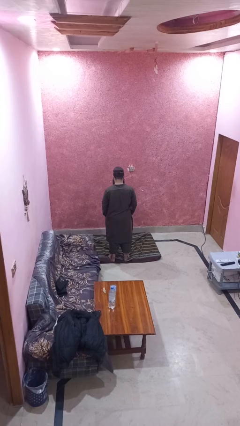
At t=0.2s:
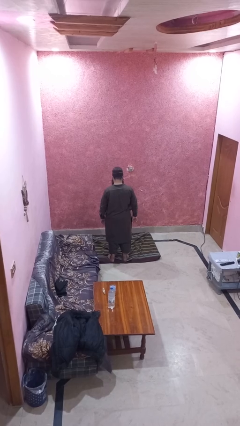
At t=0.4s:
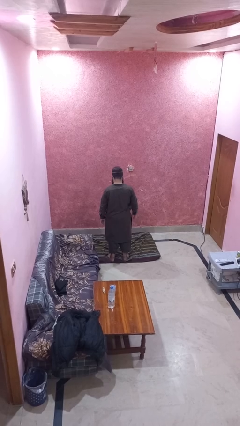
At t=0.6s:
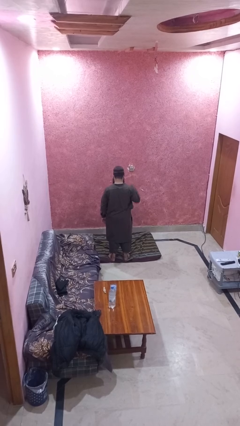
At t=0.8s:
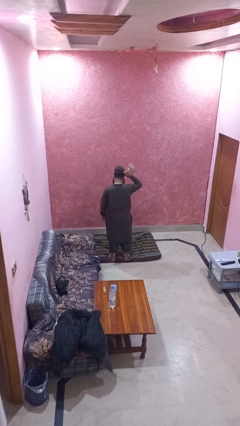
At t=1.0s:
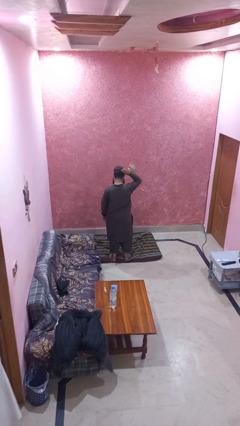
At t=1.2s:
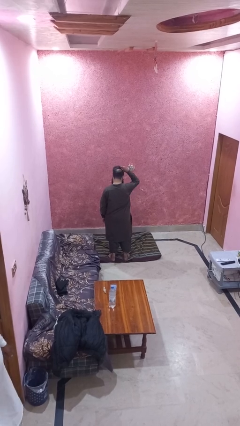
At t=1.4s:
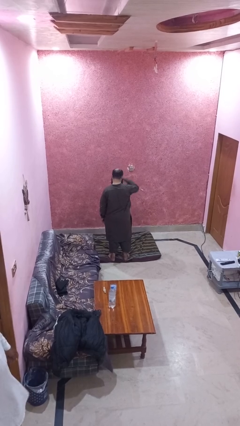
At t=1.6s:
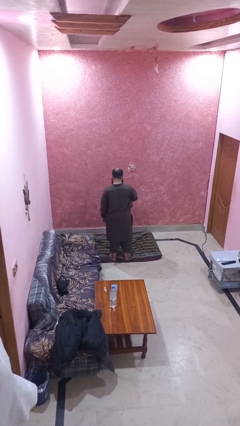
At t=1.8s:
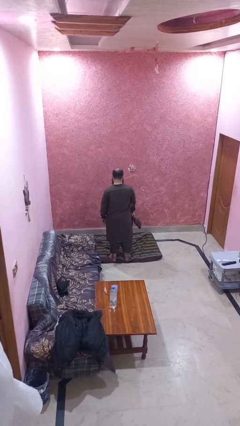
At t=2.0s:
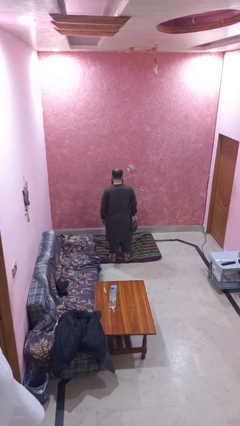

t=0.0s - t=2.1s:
person takes off hat

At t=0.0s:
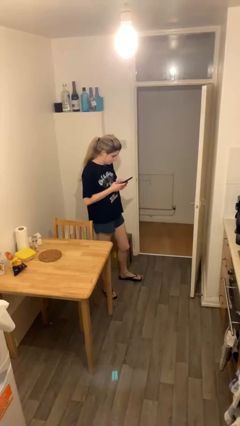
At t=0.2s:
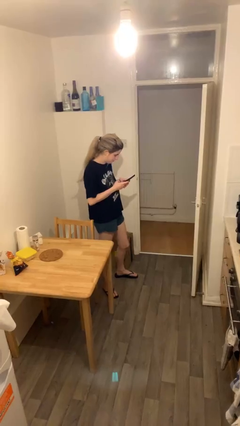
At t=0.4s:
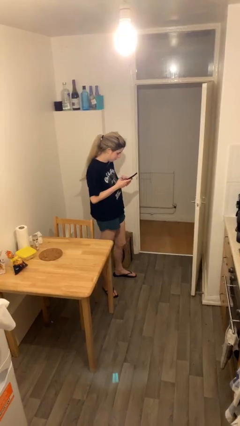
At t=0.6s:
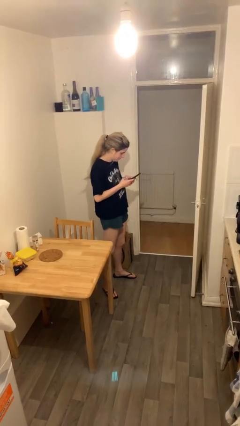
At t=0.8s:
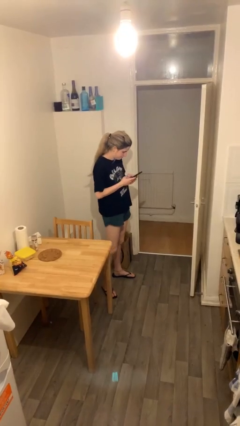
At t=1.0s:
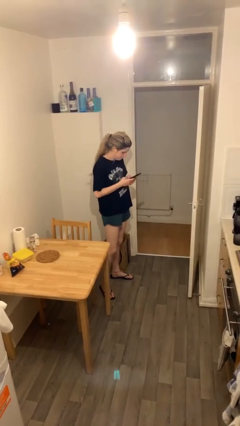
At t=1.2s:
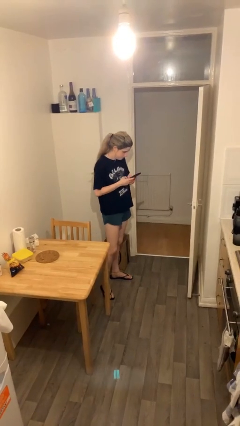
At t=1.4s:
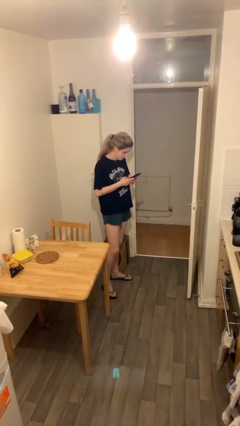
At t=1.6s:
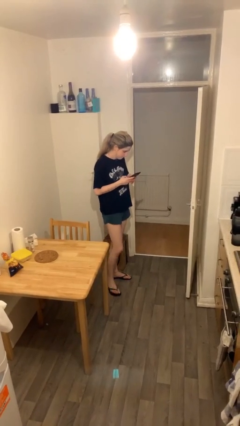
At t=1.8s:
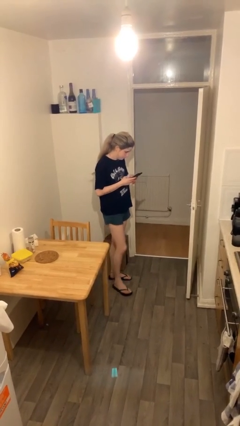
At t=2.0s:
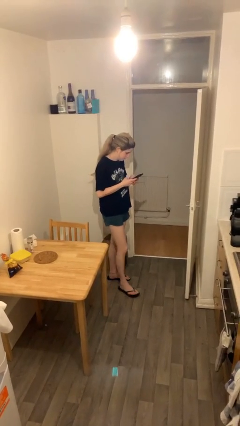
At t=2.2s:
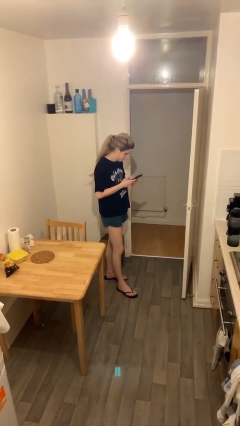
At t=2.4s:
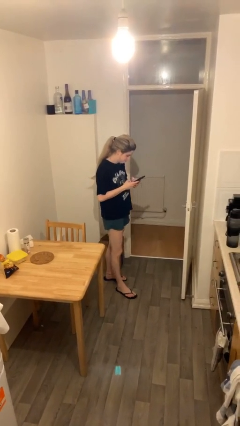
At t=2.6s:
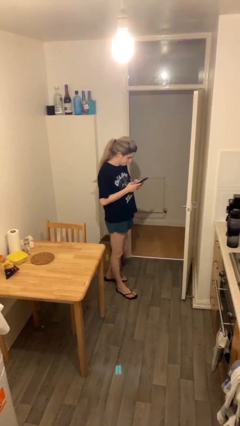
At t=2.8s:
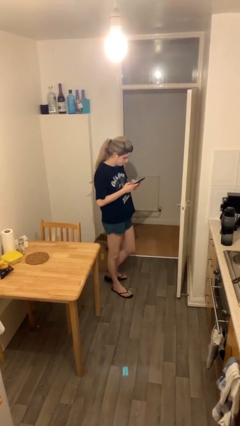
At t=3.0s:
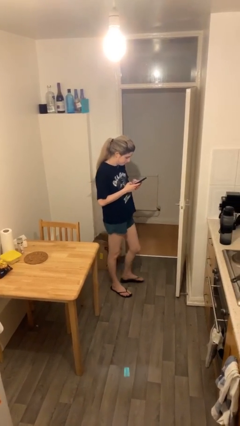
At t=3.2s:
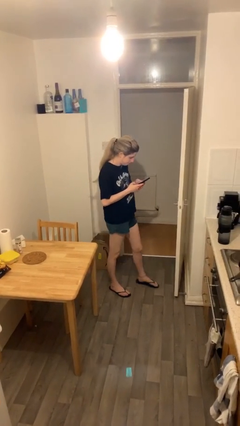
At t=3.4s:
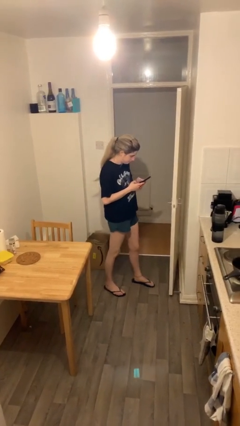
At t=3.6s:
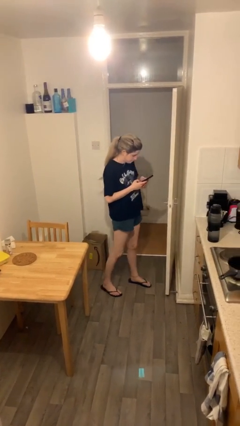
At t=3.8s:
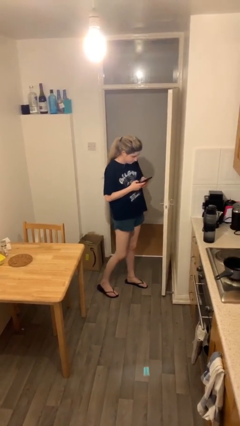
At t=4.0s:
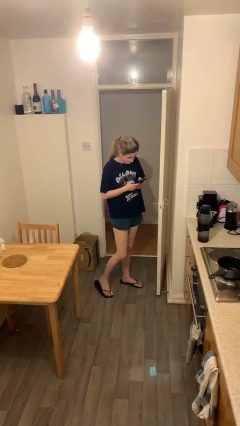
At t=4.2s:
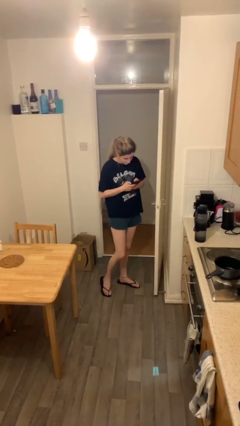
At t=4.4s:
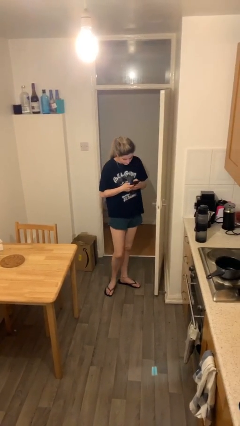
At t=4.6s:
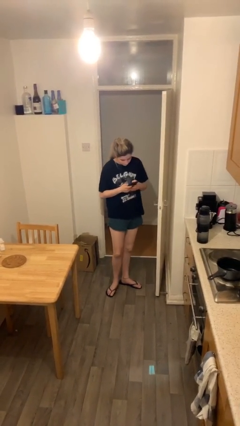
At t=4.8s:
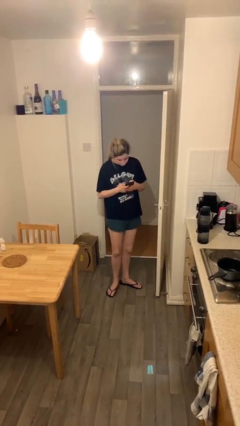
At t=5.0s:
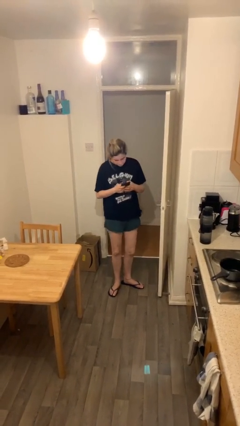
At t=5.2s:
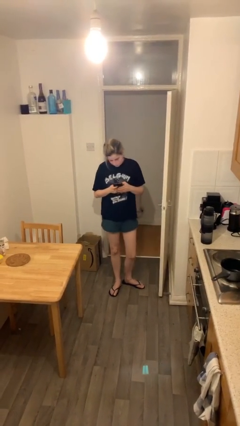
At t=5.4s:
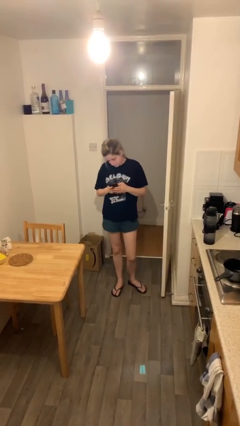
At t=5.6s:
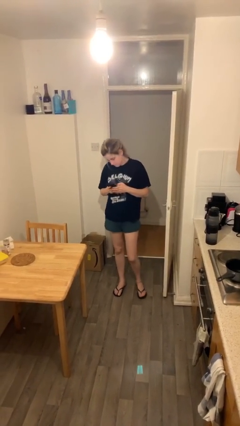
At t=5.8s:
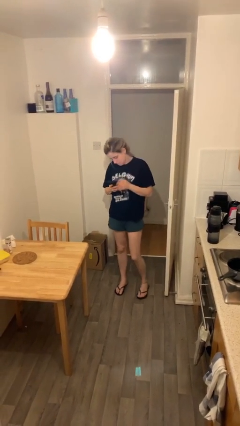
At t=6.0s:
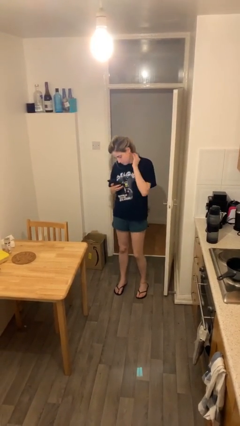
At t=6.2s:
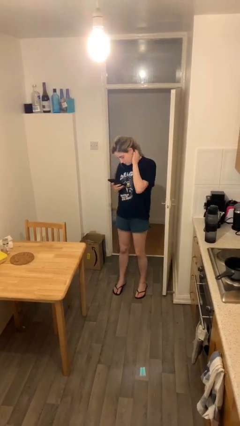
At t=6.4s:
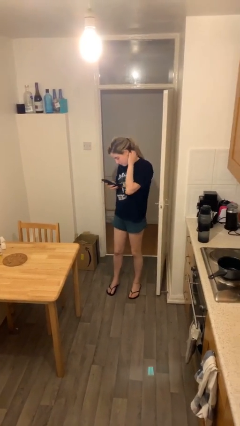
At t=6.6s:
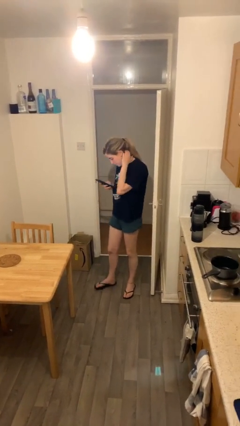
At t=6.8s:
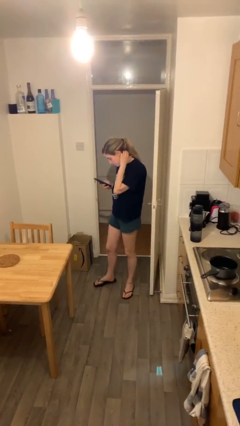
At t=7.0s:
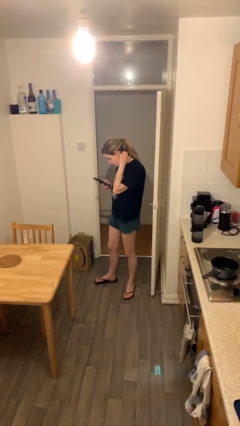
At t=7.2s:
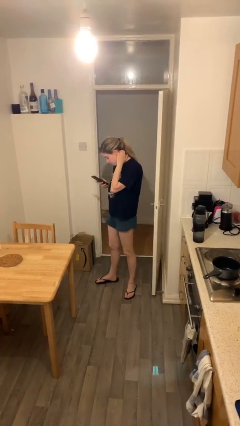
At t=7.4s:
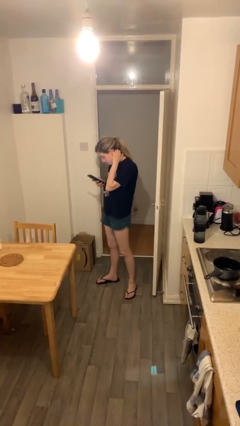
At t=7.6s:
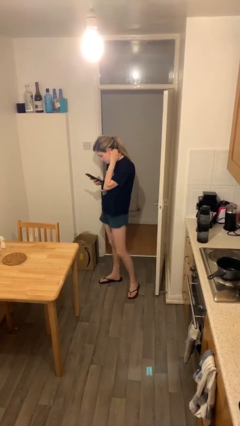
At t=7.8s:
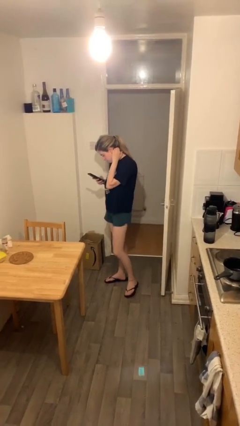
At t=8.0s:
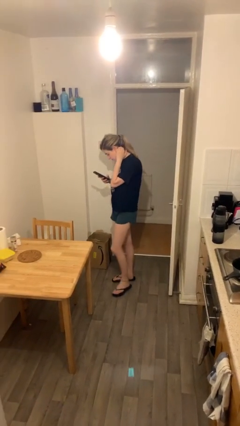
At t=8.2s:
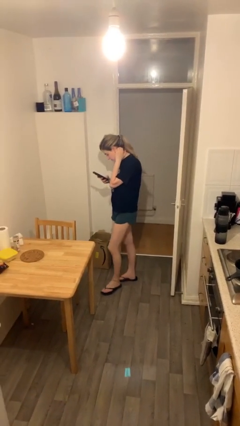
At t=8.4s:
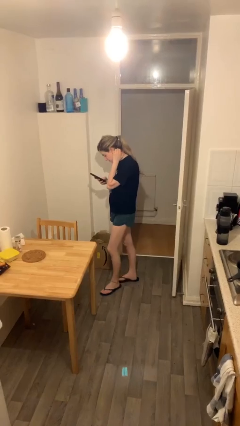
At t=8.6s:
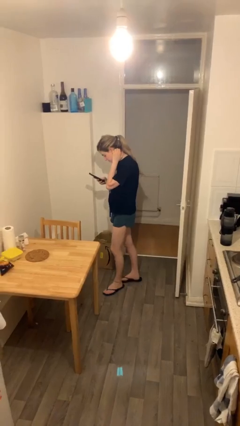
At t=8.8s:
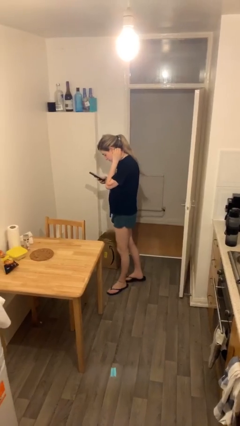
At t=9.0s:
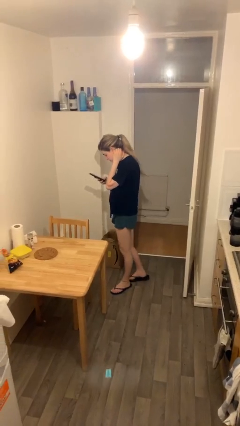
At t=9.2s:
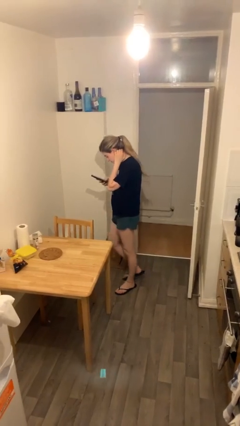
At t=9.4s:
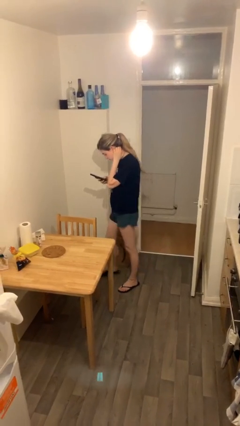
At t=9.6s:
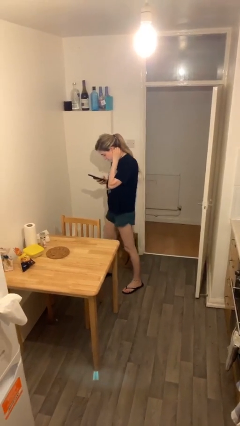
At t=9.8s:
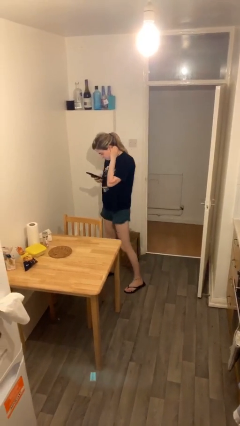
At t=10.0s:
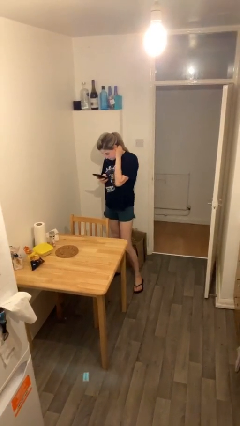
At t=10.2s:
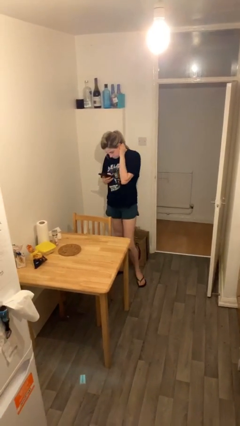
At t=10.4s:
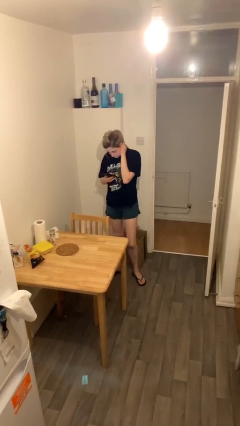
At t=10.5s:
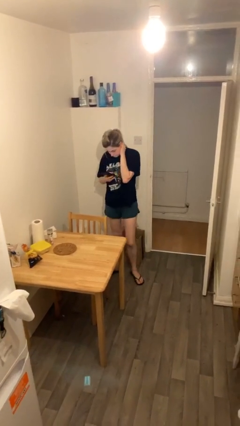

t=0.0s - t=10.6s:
person texts on phone

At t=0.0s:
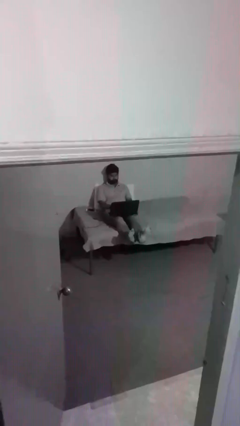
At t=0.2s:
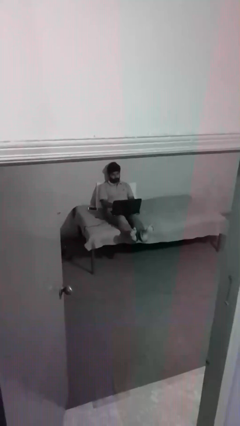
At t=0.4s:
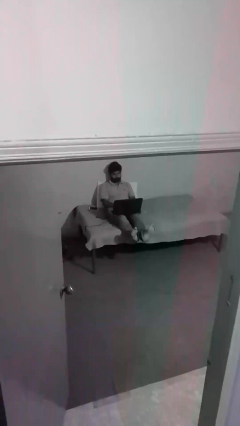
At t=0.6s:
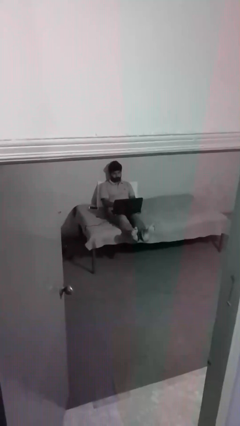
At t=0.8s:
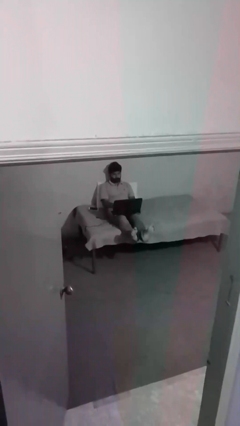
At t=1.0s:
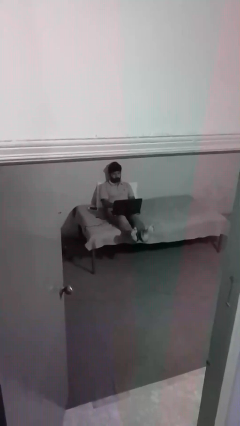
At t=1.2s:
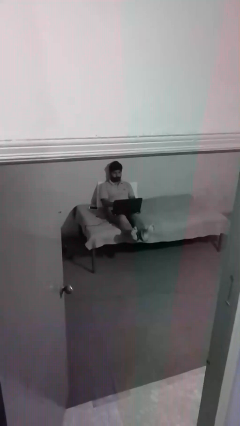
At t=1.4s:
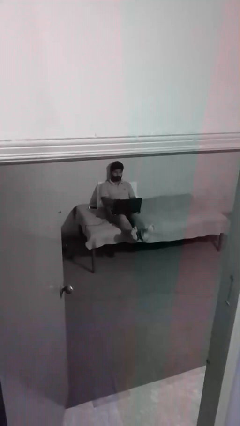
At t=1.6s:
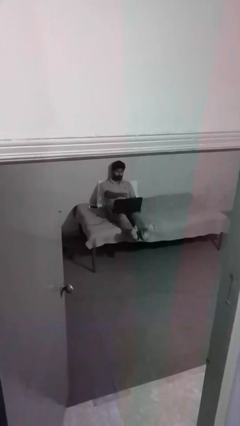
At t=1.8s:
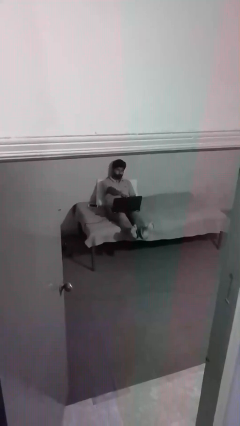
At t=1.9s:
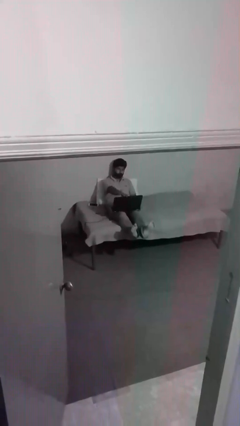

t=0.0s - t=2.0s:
person interacts with laptop

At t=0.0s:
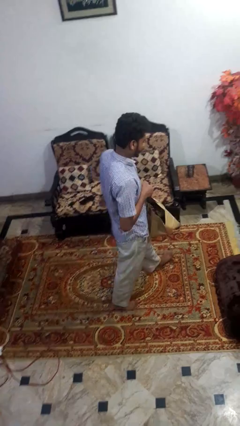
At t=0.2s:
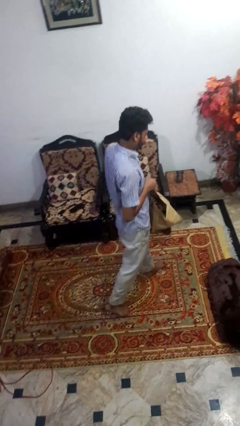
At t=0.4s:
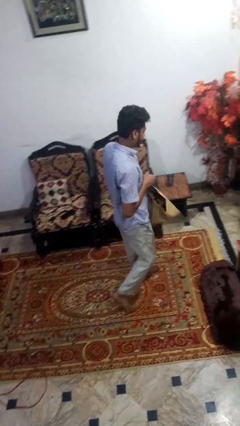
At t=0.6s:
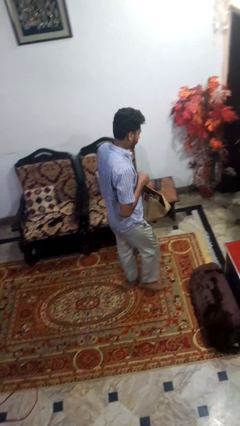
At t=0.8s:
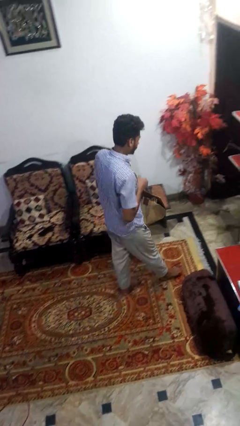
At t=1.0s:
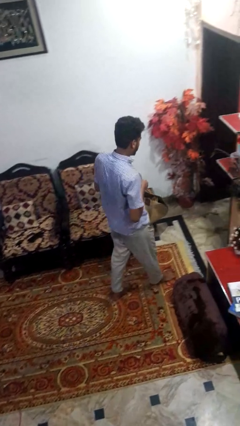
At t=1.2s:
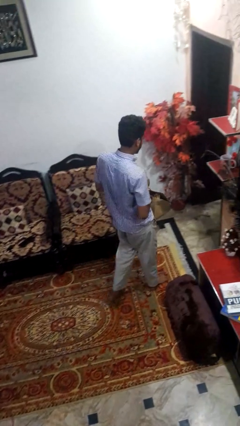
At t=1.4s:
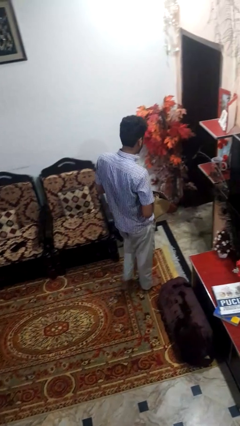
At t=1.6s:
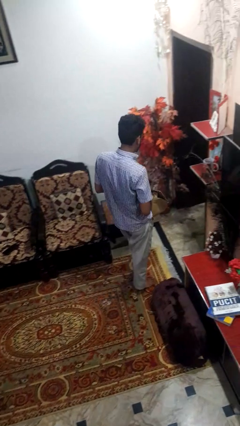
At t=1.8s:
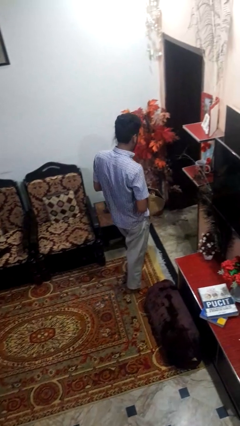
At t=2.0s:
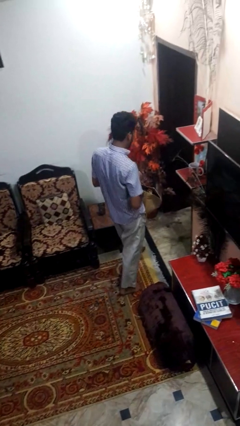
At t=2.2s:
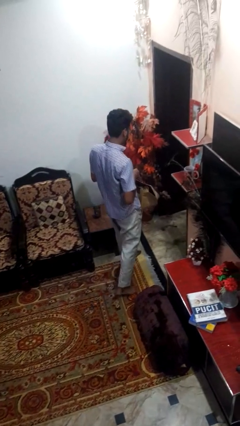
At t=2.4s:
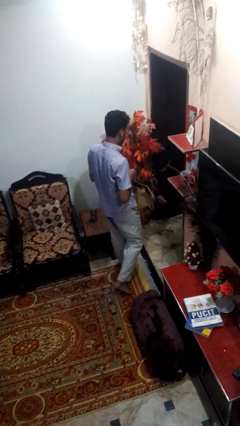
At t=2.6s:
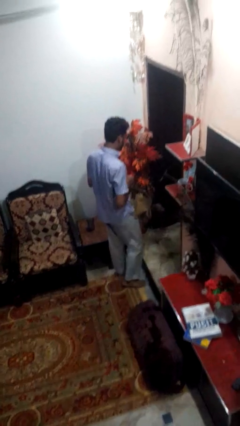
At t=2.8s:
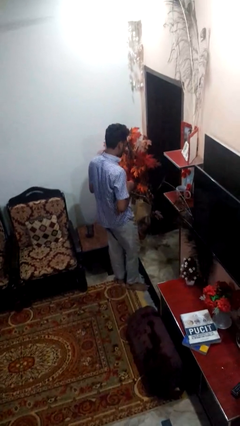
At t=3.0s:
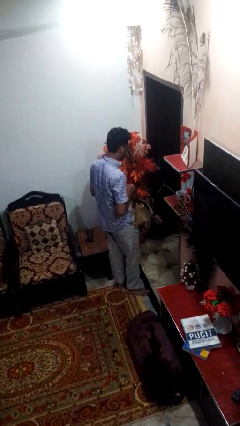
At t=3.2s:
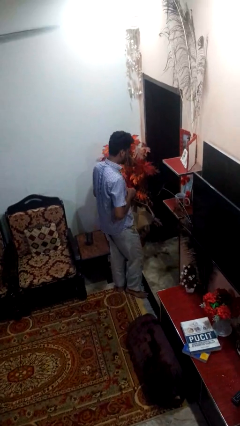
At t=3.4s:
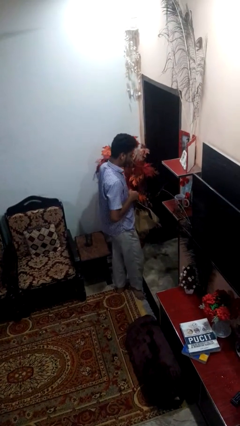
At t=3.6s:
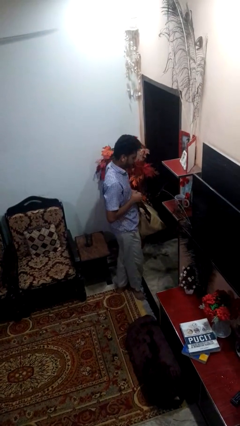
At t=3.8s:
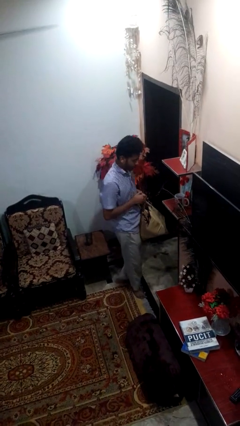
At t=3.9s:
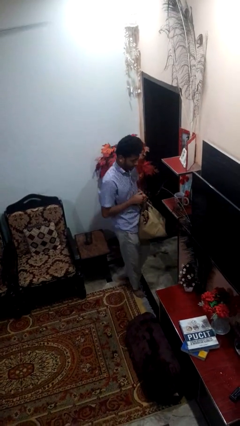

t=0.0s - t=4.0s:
person carries groceries
